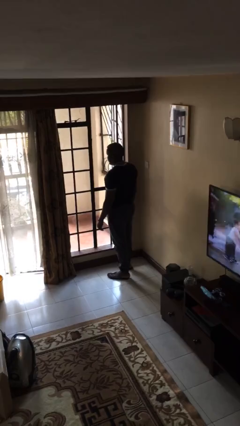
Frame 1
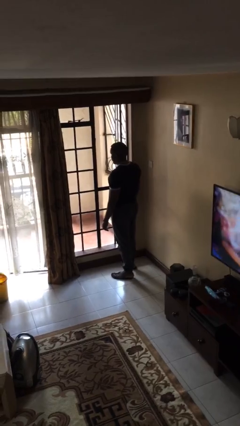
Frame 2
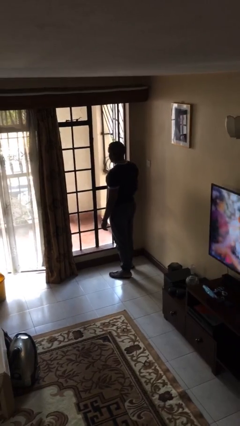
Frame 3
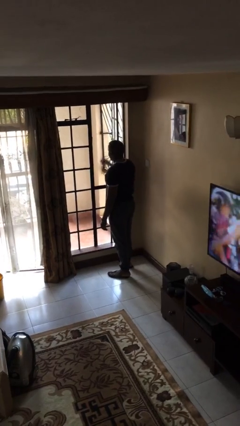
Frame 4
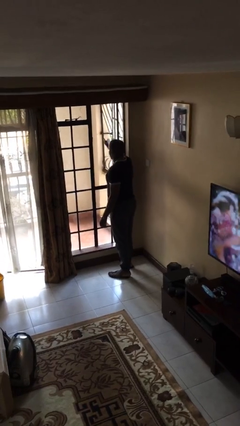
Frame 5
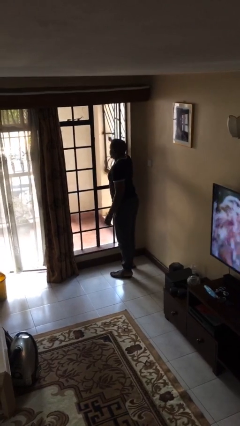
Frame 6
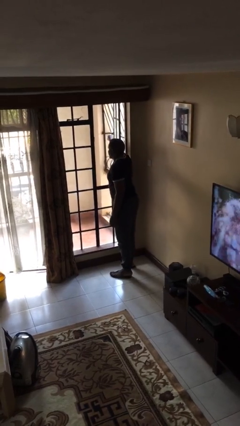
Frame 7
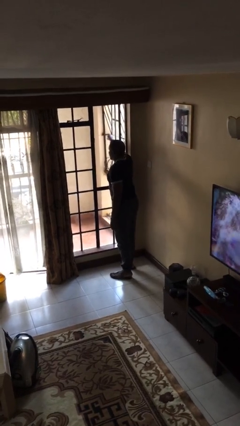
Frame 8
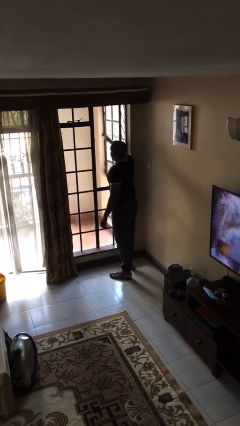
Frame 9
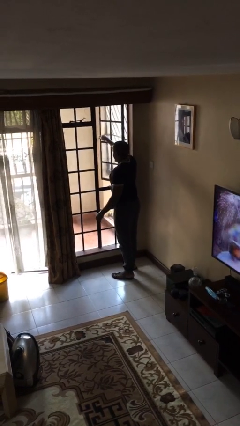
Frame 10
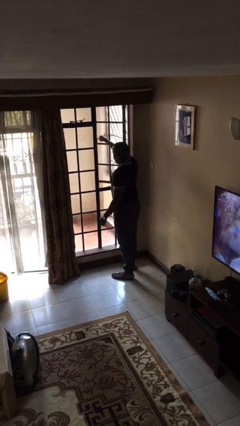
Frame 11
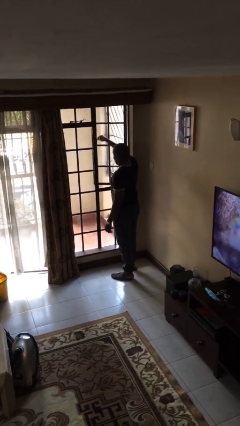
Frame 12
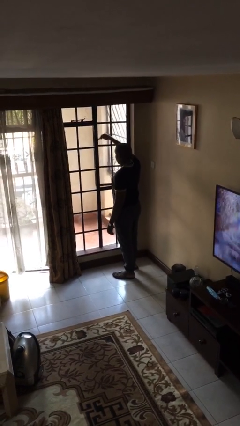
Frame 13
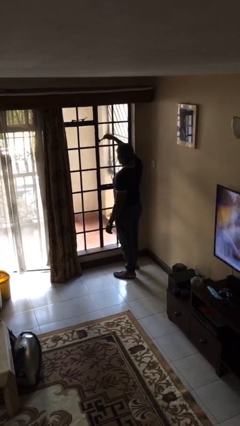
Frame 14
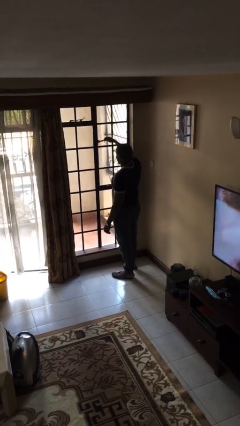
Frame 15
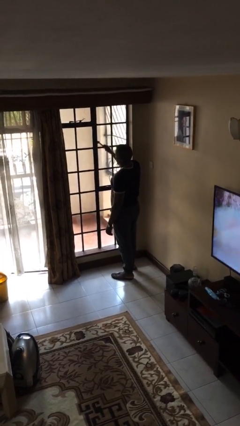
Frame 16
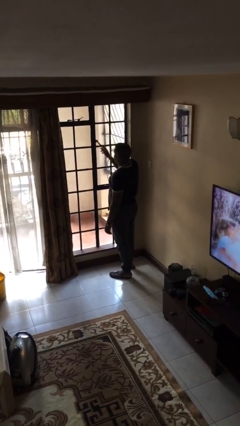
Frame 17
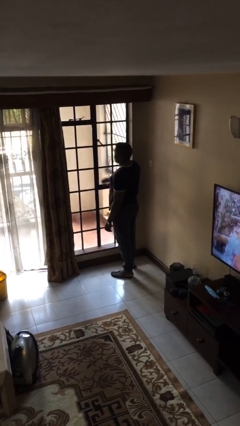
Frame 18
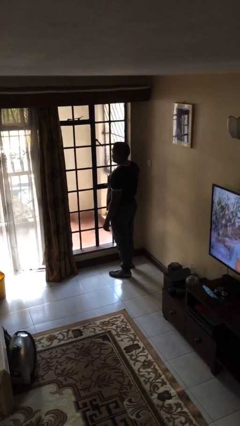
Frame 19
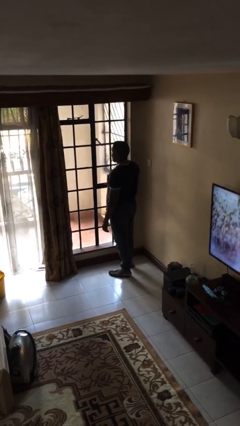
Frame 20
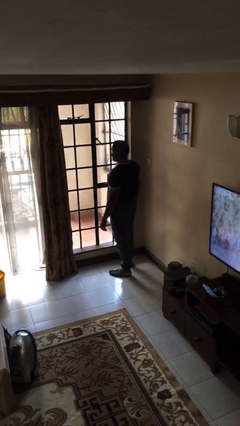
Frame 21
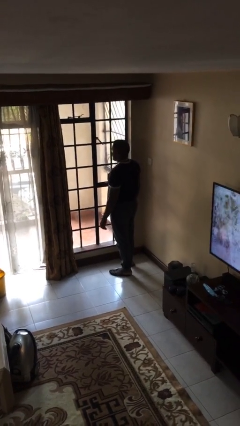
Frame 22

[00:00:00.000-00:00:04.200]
person closes home window

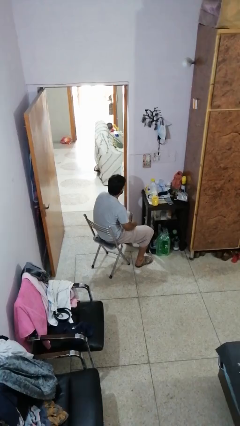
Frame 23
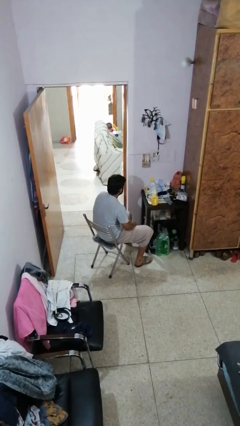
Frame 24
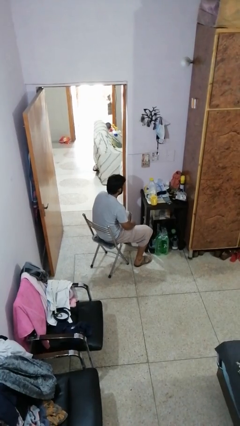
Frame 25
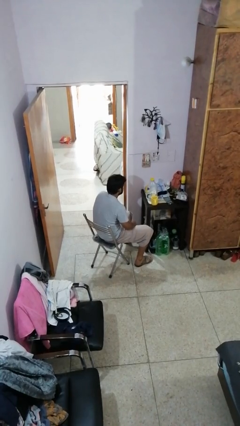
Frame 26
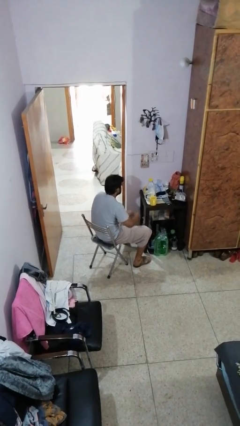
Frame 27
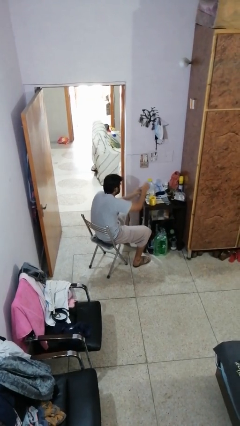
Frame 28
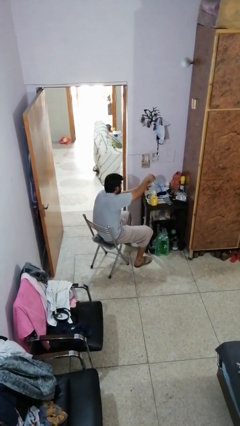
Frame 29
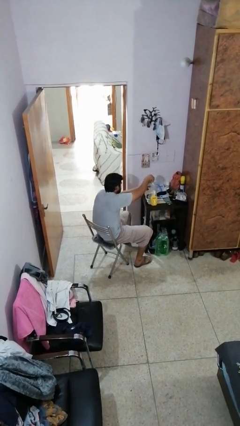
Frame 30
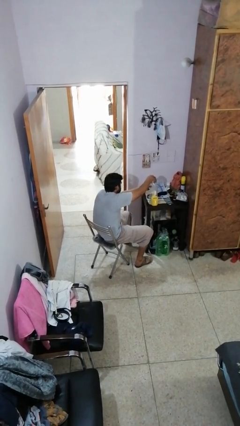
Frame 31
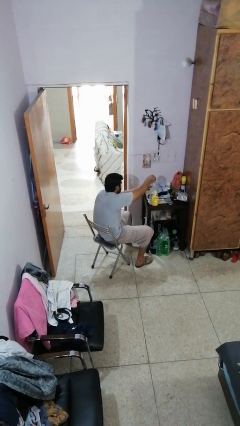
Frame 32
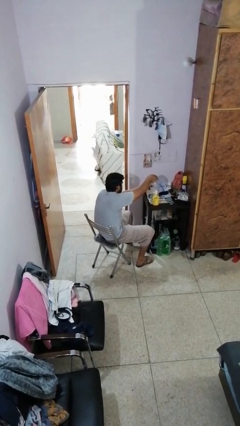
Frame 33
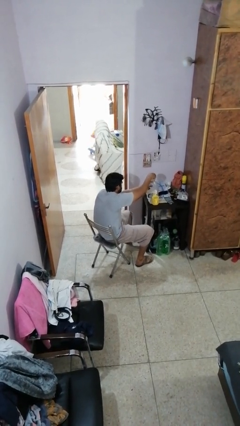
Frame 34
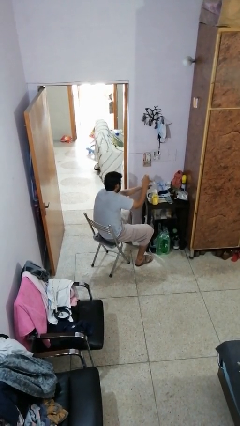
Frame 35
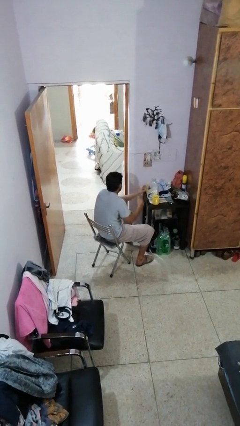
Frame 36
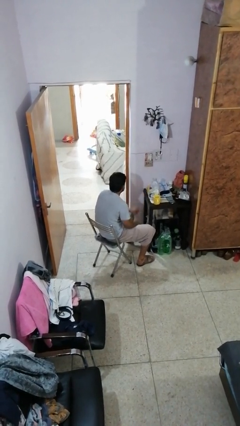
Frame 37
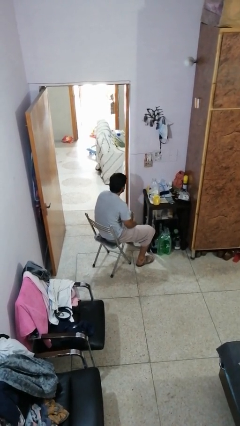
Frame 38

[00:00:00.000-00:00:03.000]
person unscrews lid from bottle

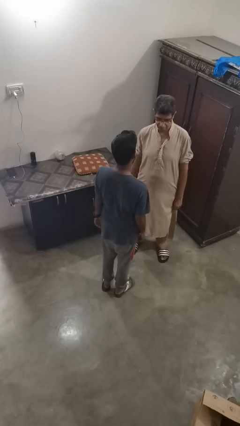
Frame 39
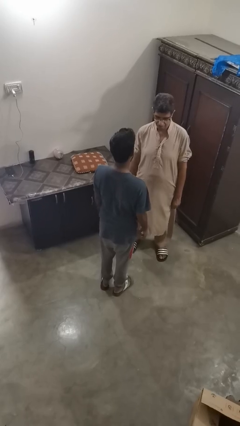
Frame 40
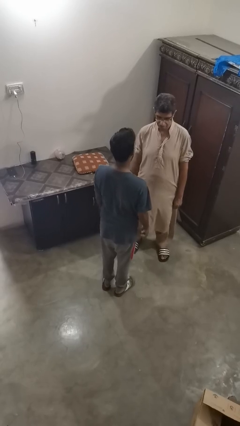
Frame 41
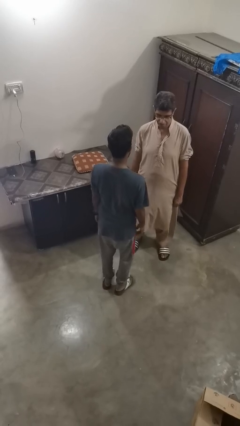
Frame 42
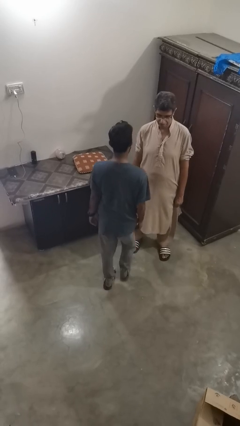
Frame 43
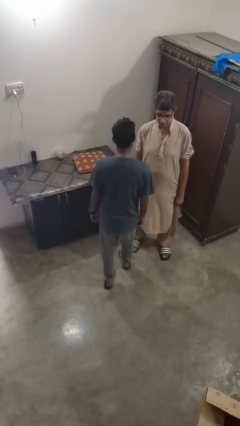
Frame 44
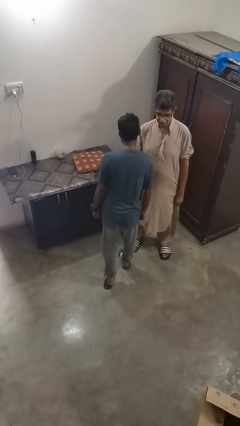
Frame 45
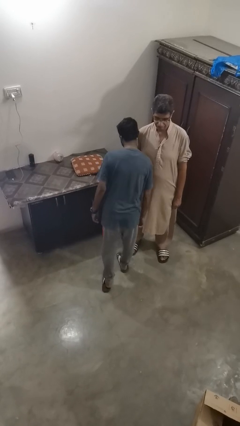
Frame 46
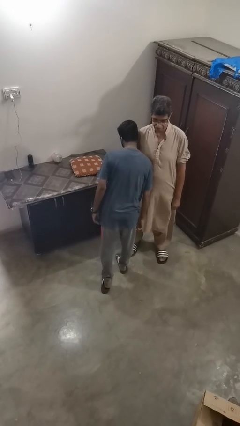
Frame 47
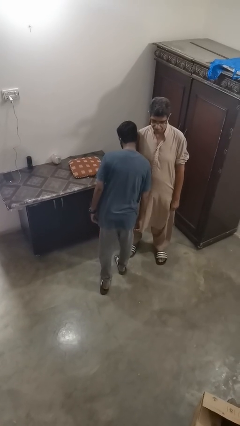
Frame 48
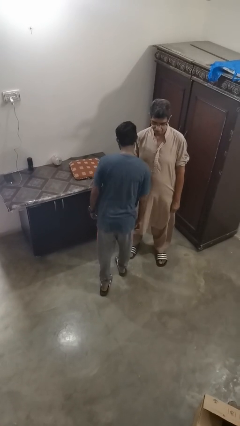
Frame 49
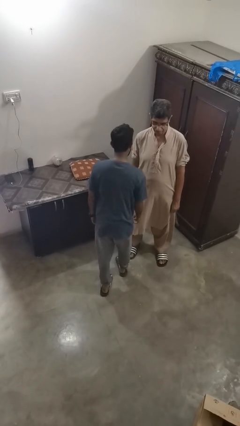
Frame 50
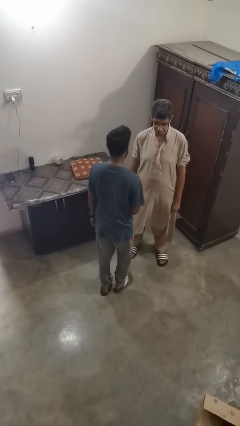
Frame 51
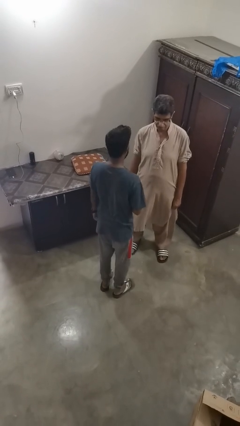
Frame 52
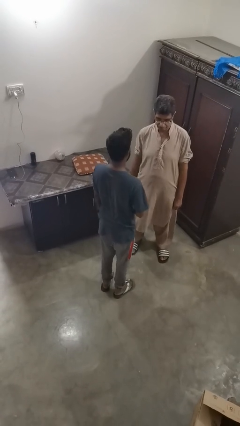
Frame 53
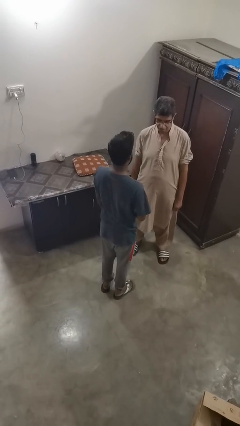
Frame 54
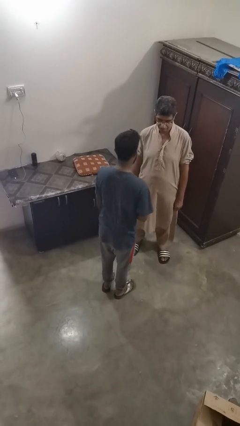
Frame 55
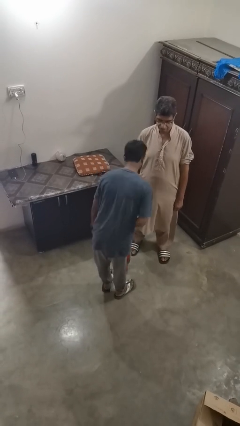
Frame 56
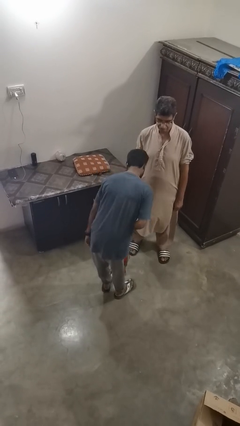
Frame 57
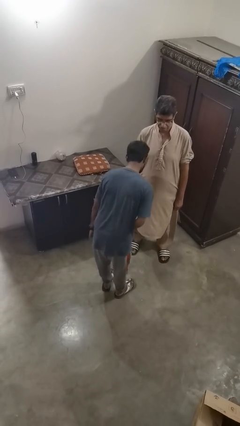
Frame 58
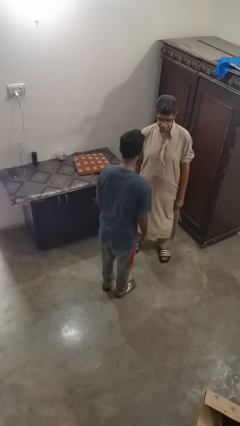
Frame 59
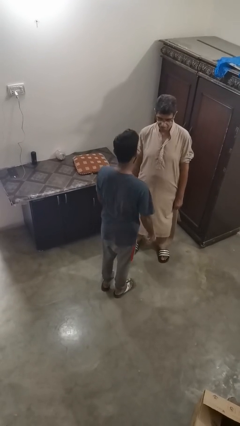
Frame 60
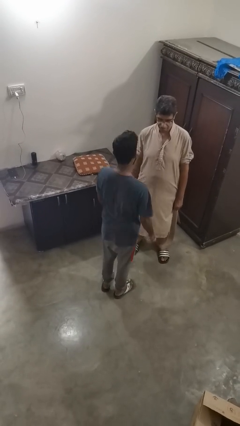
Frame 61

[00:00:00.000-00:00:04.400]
person bumps into person

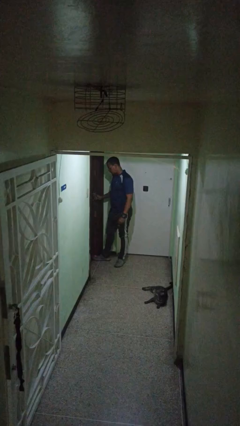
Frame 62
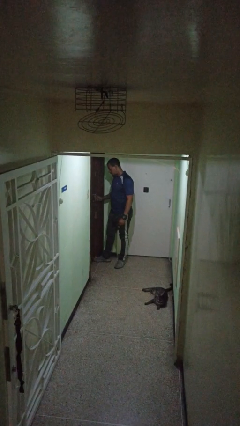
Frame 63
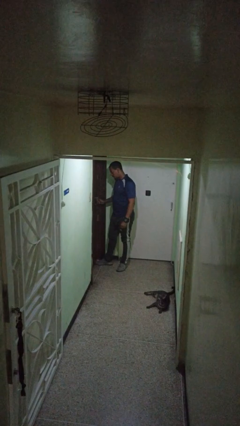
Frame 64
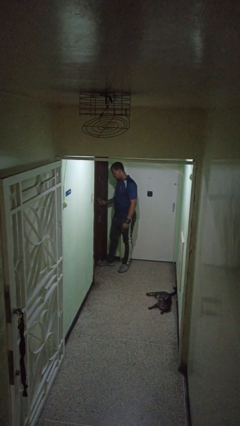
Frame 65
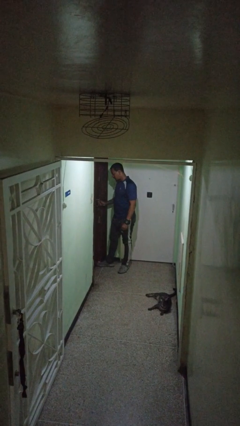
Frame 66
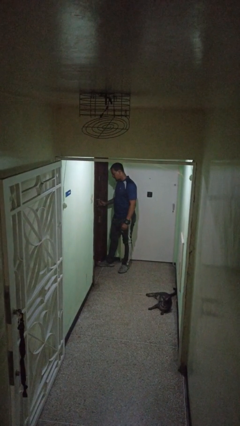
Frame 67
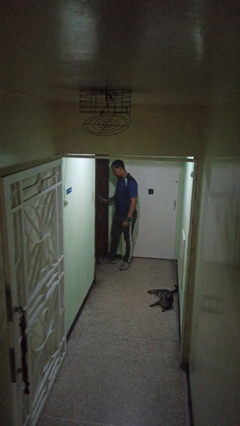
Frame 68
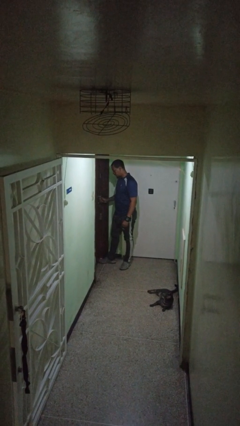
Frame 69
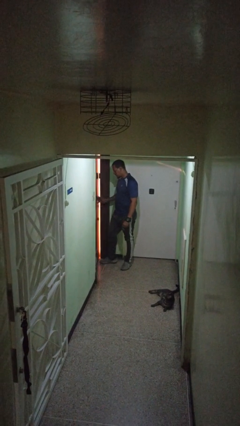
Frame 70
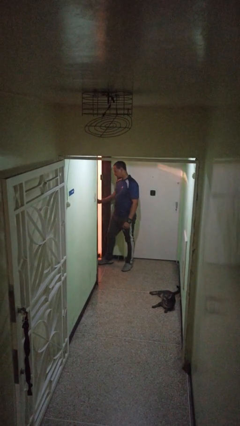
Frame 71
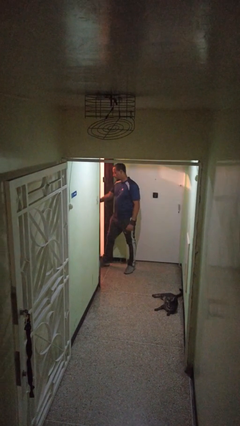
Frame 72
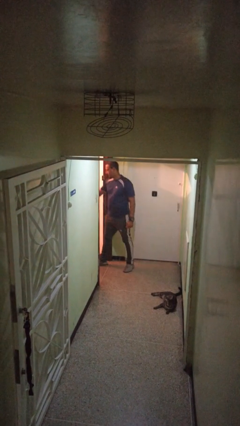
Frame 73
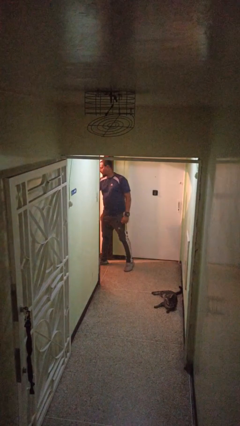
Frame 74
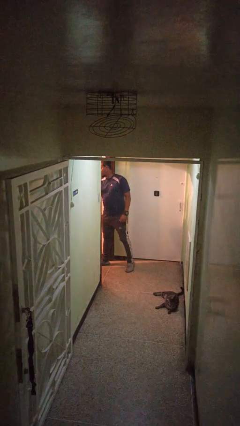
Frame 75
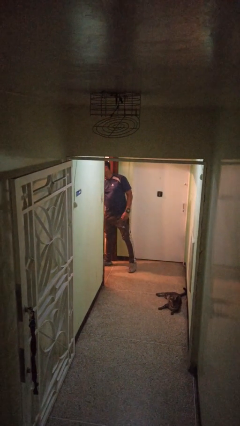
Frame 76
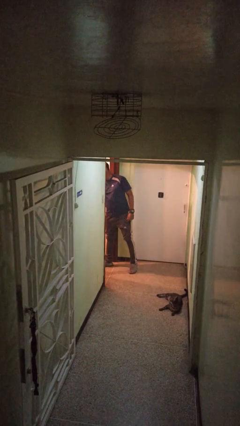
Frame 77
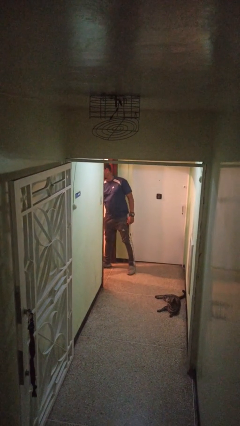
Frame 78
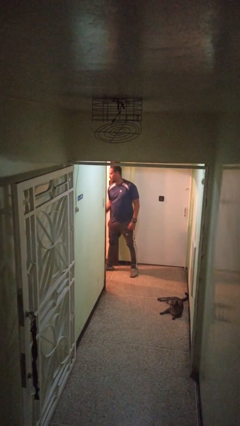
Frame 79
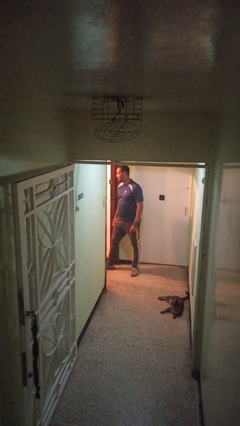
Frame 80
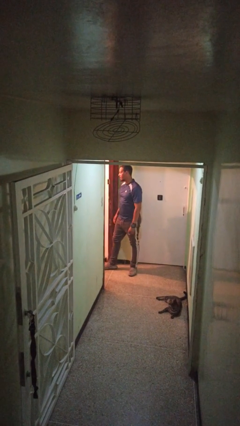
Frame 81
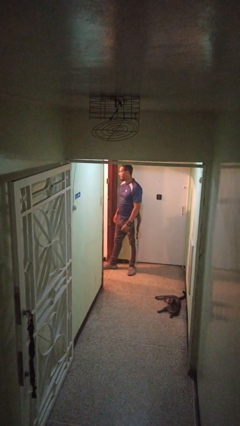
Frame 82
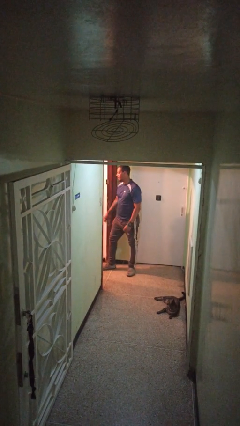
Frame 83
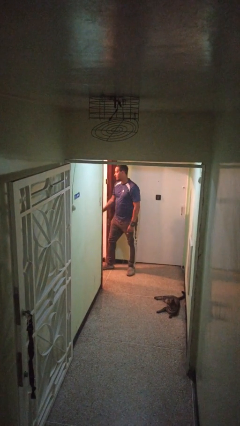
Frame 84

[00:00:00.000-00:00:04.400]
person opens facility door

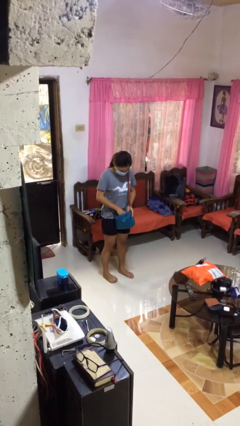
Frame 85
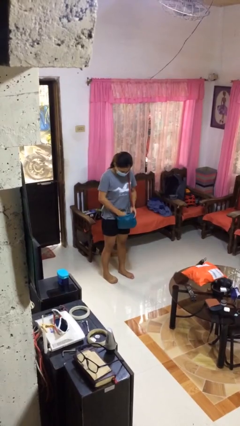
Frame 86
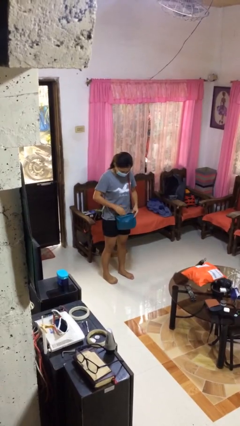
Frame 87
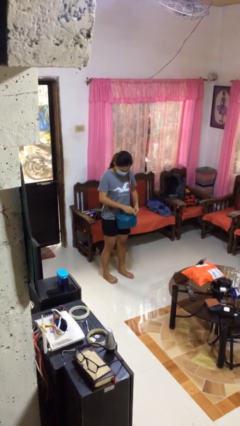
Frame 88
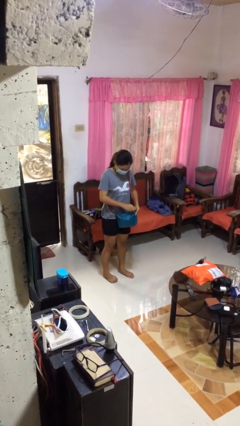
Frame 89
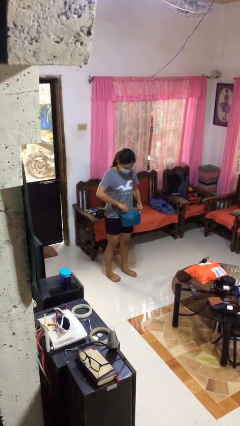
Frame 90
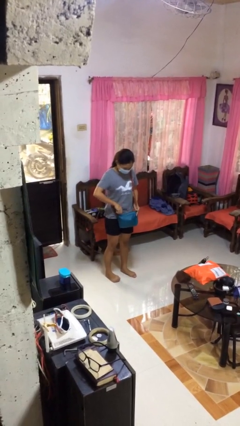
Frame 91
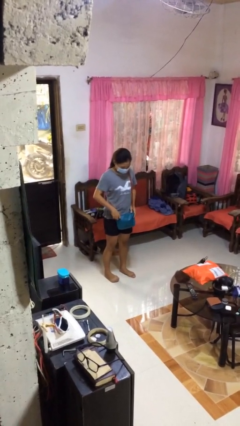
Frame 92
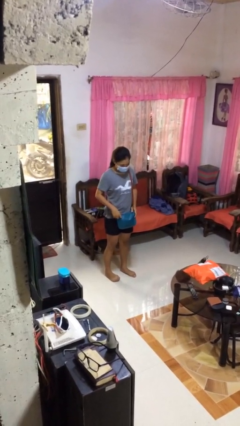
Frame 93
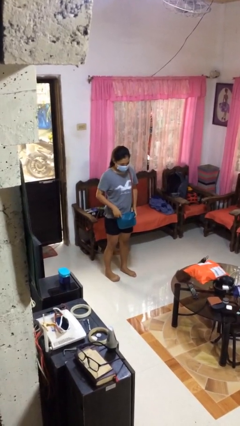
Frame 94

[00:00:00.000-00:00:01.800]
person puts object into purse
